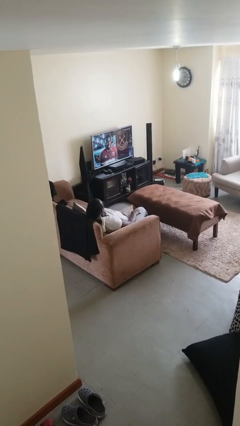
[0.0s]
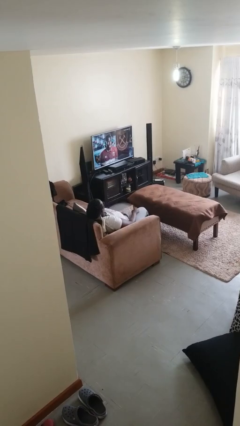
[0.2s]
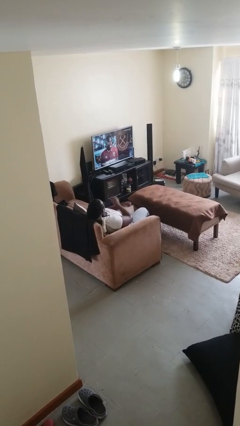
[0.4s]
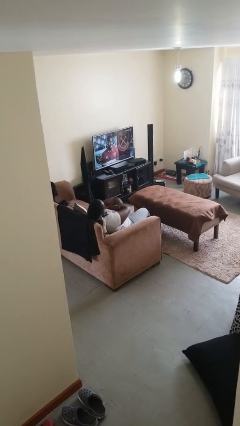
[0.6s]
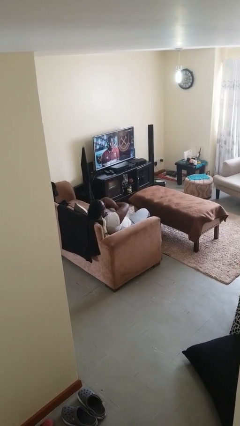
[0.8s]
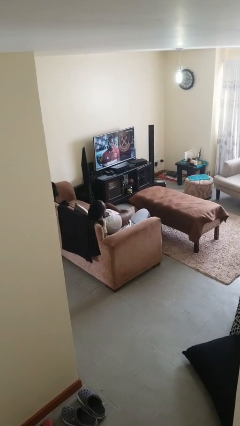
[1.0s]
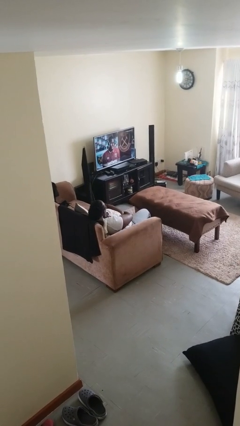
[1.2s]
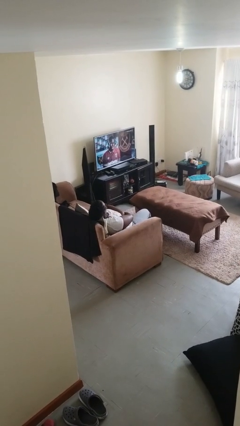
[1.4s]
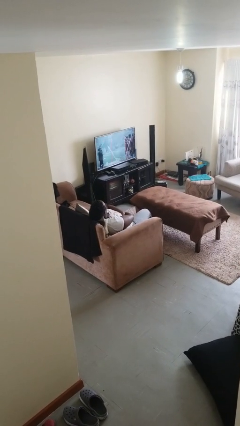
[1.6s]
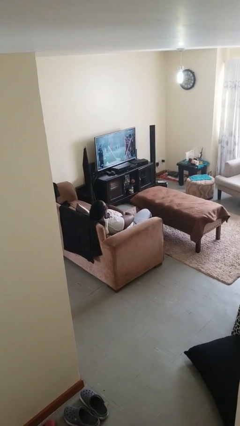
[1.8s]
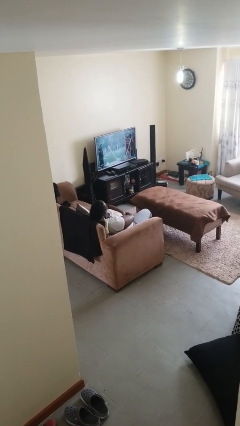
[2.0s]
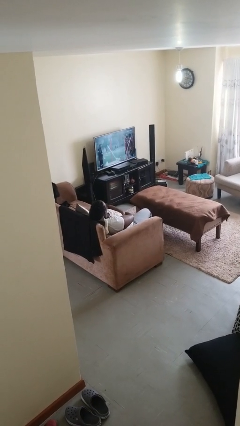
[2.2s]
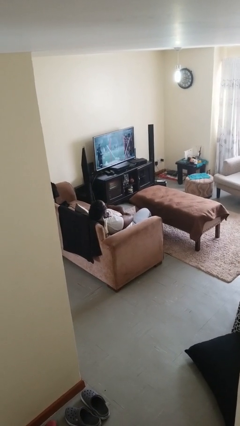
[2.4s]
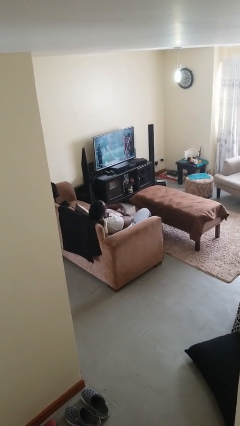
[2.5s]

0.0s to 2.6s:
person crosses arms

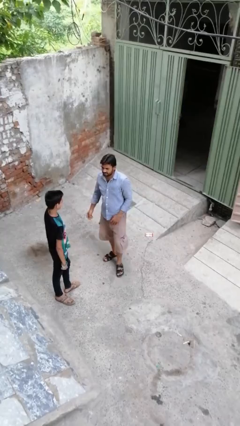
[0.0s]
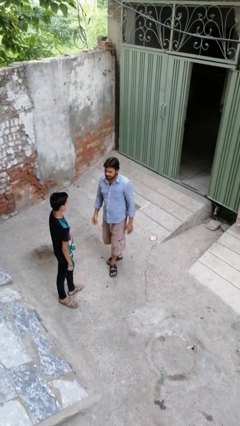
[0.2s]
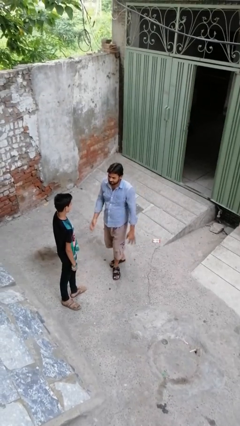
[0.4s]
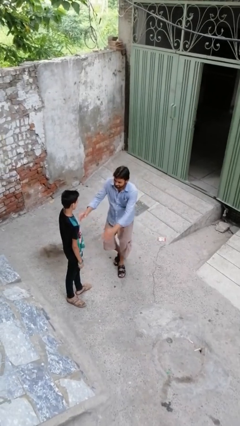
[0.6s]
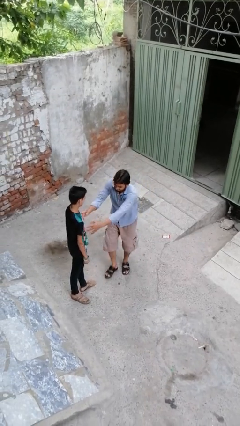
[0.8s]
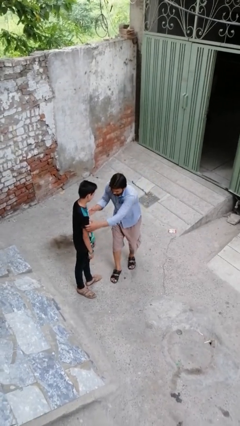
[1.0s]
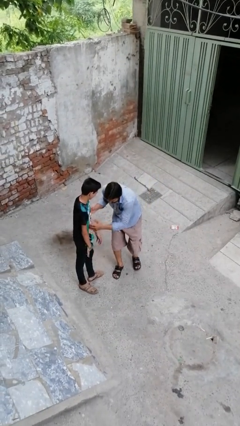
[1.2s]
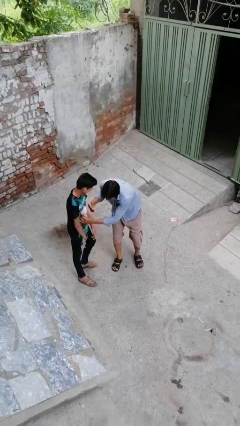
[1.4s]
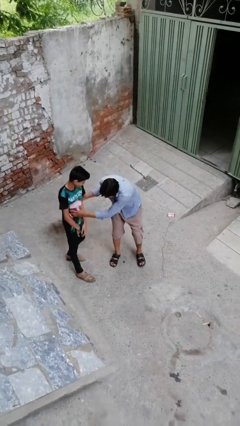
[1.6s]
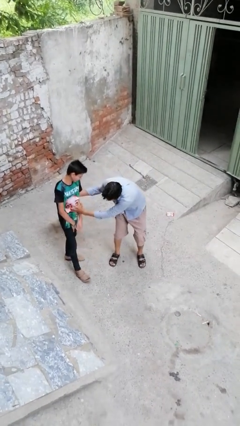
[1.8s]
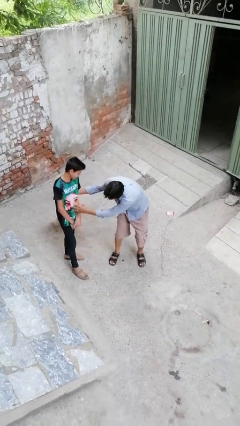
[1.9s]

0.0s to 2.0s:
person tickles person

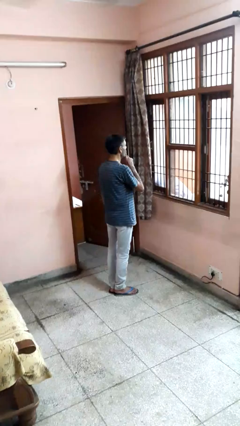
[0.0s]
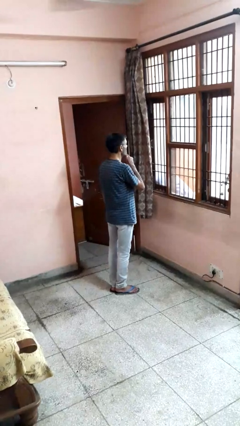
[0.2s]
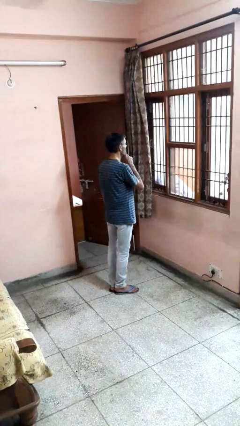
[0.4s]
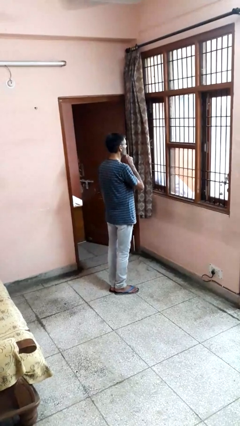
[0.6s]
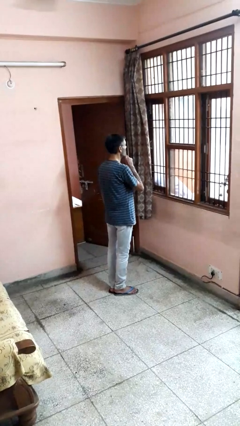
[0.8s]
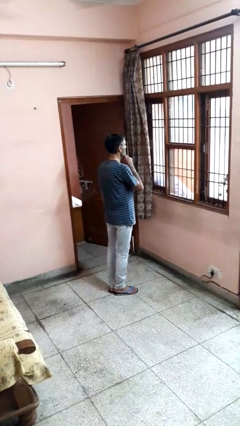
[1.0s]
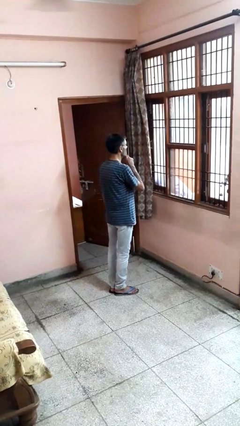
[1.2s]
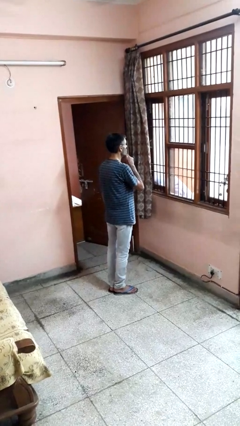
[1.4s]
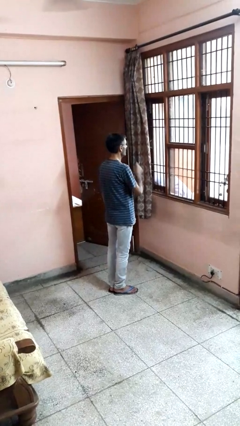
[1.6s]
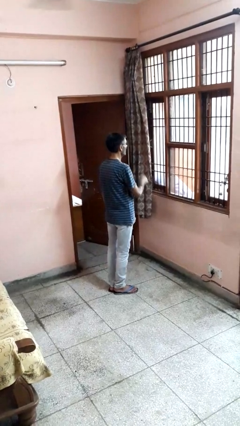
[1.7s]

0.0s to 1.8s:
person gestures be quiet

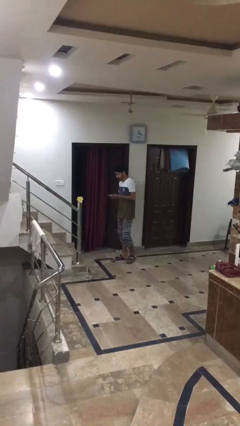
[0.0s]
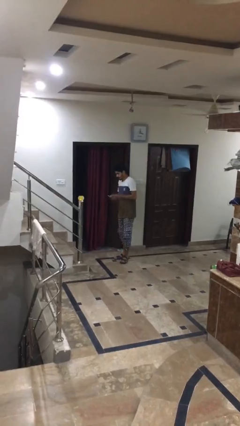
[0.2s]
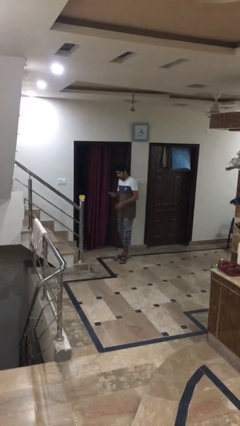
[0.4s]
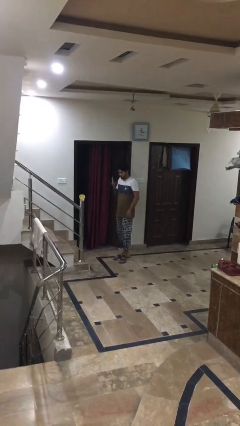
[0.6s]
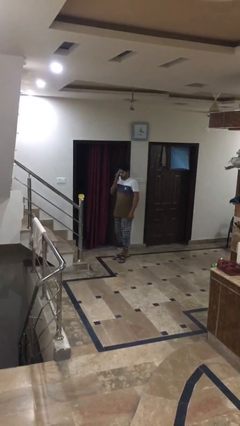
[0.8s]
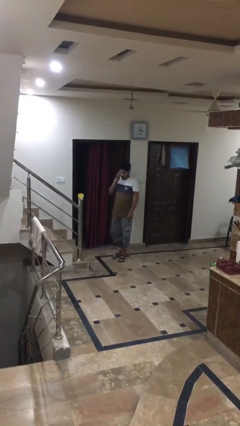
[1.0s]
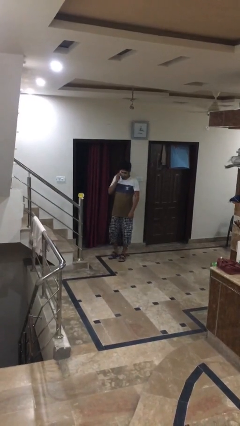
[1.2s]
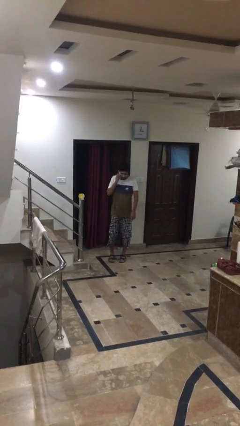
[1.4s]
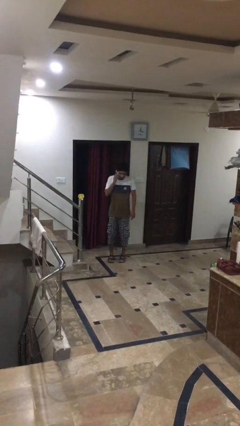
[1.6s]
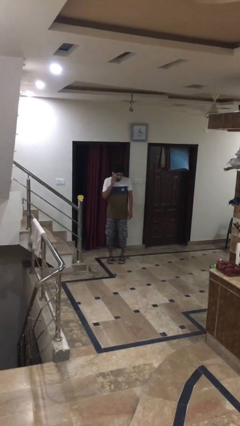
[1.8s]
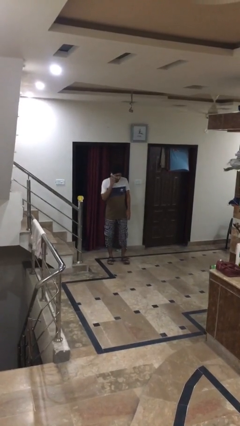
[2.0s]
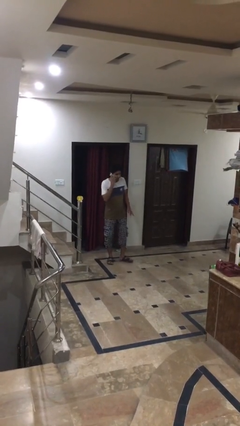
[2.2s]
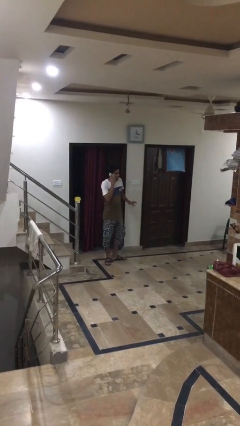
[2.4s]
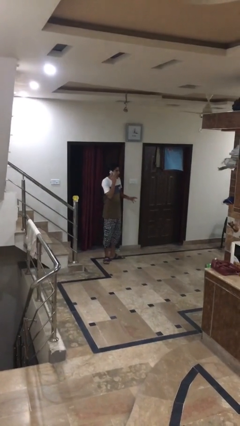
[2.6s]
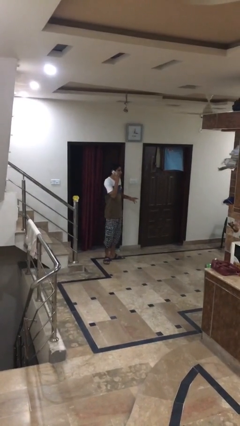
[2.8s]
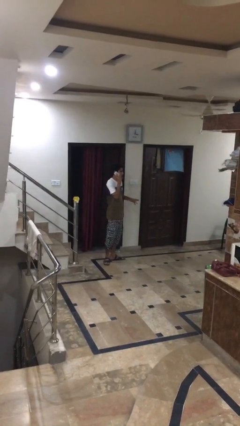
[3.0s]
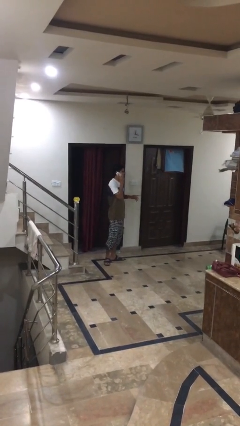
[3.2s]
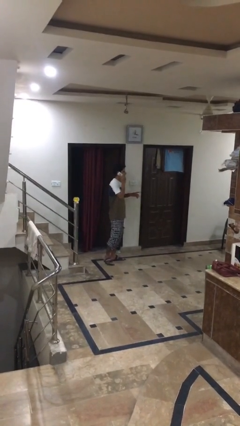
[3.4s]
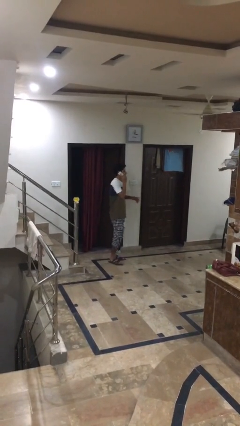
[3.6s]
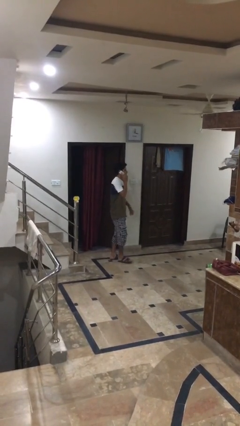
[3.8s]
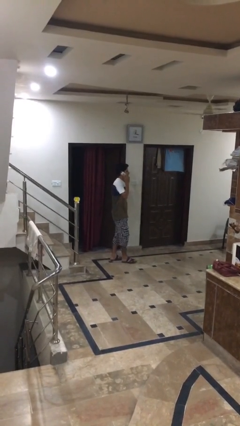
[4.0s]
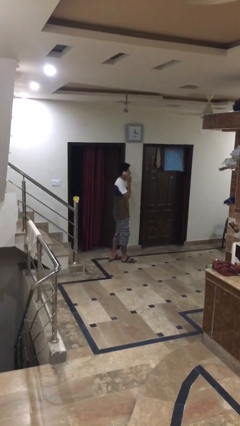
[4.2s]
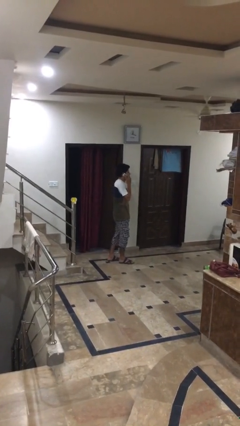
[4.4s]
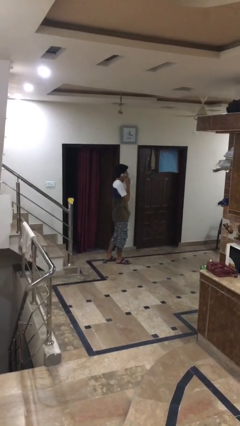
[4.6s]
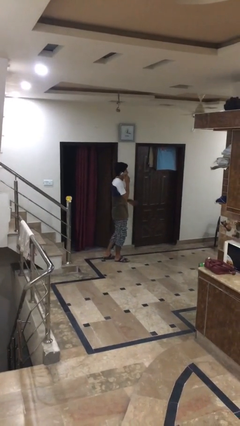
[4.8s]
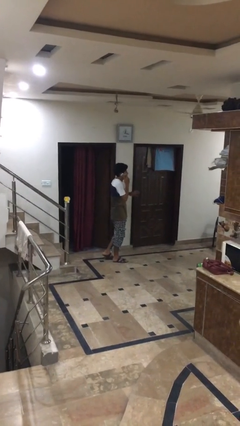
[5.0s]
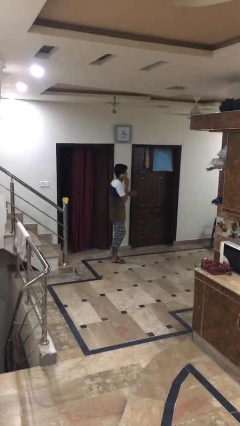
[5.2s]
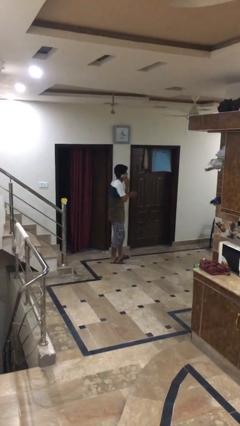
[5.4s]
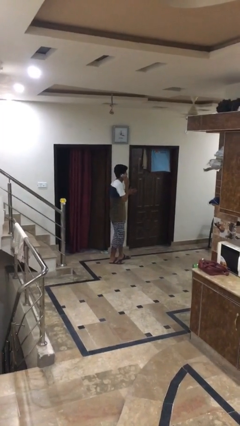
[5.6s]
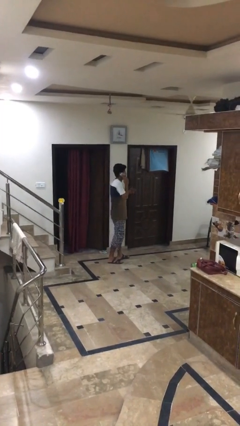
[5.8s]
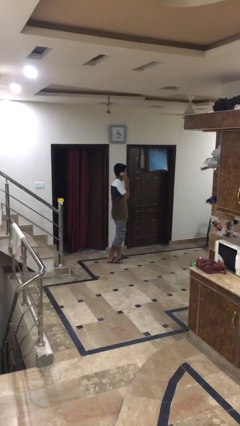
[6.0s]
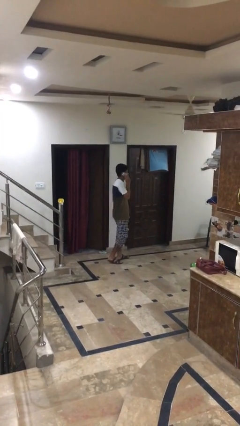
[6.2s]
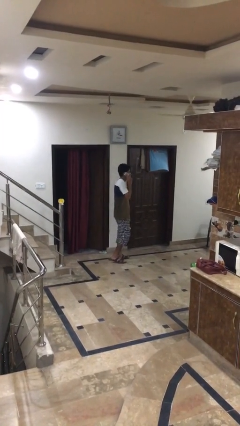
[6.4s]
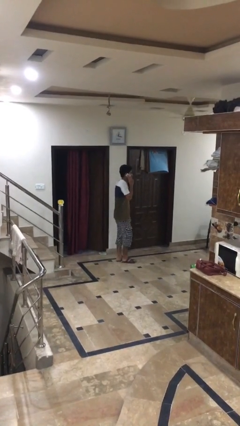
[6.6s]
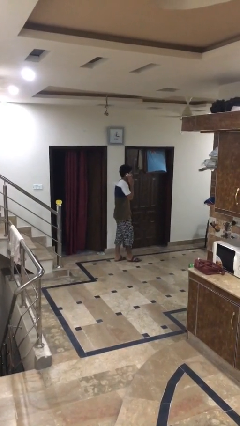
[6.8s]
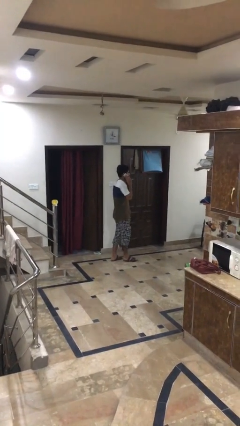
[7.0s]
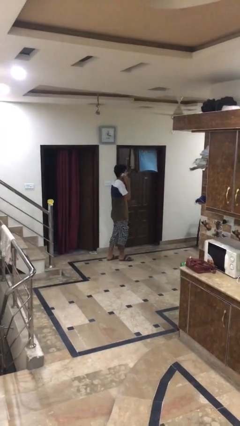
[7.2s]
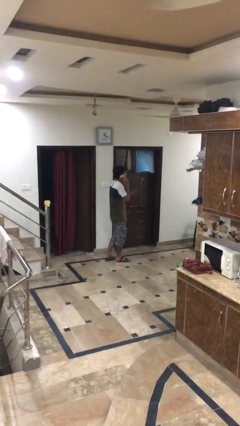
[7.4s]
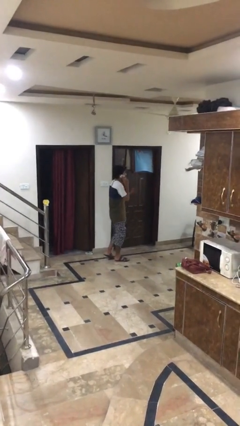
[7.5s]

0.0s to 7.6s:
person talks on phone

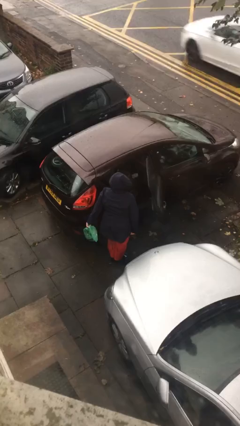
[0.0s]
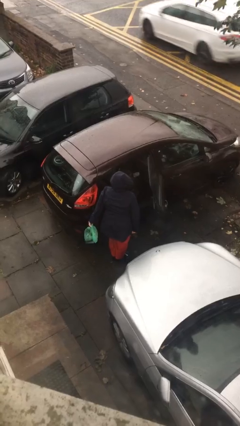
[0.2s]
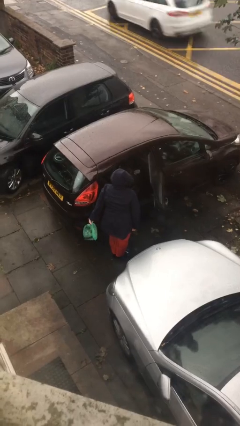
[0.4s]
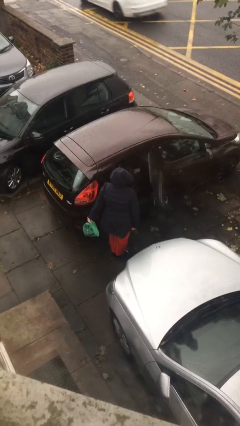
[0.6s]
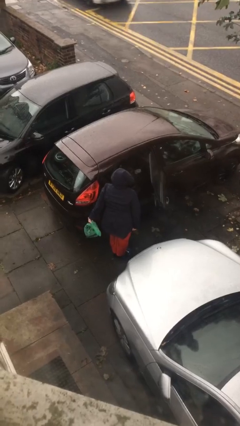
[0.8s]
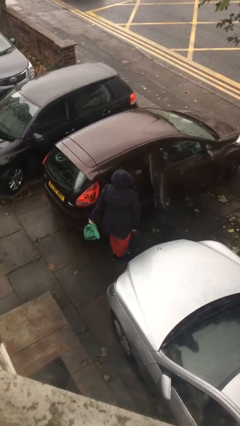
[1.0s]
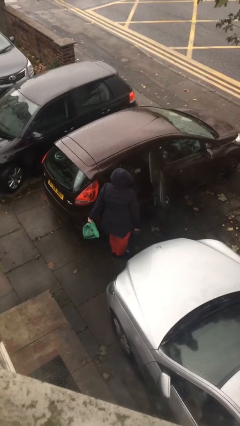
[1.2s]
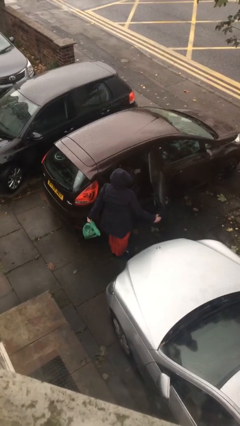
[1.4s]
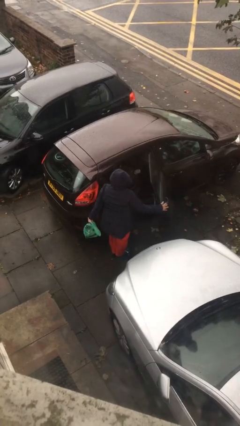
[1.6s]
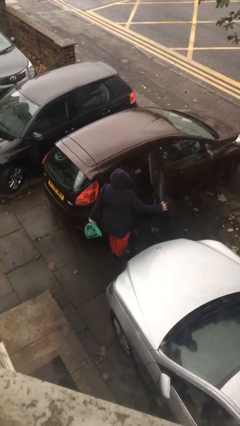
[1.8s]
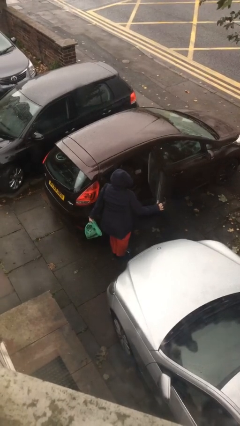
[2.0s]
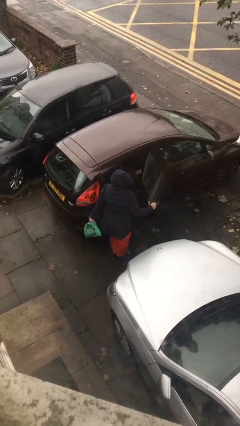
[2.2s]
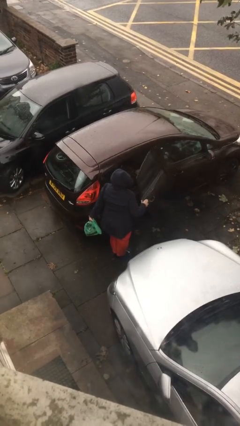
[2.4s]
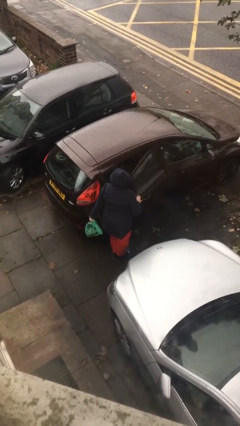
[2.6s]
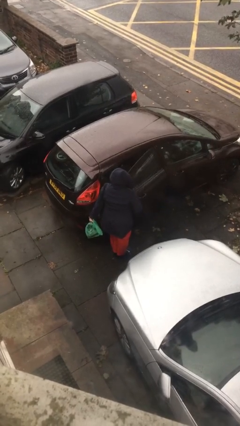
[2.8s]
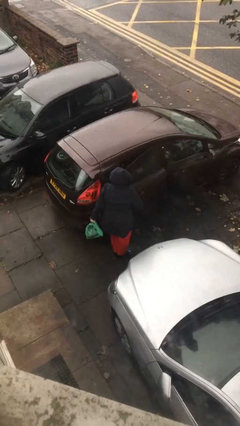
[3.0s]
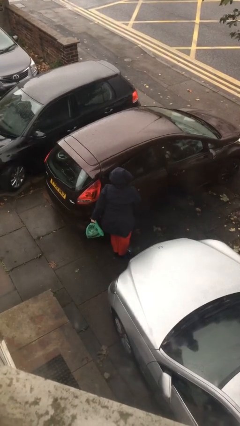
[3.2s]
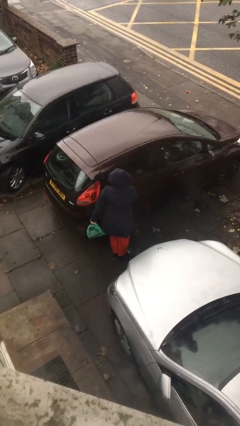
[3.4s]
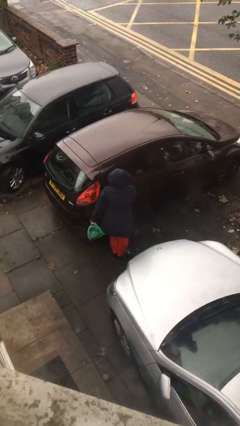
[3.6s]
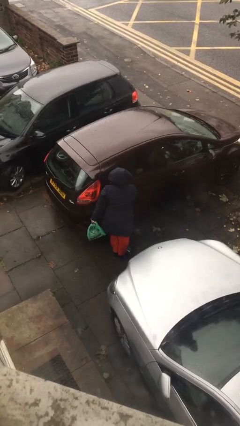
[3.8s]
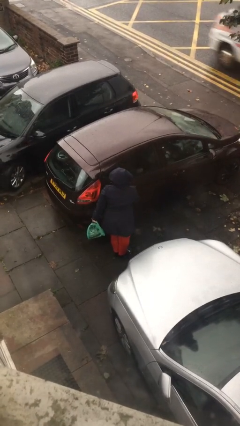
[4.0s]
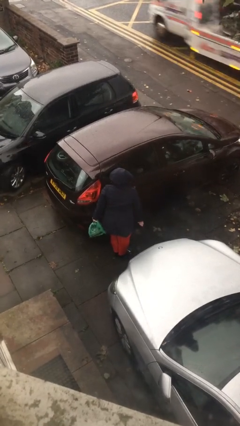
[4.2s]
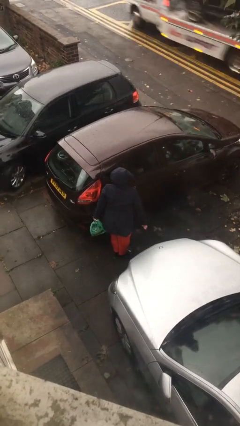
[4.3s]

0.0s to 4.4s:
person closes car door
